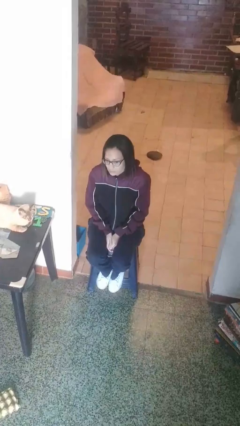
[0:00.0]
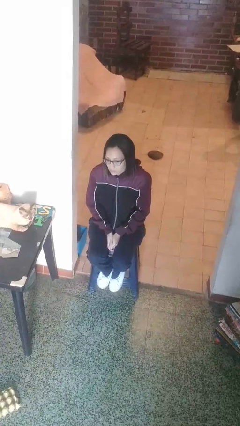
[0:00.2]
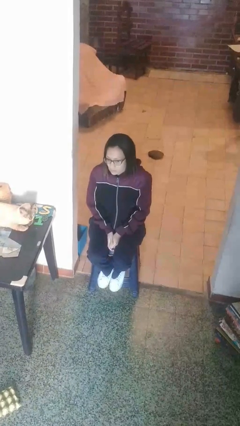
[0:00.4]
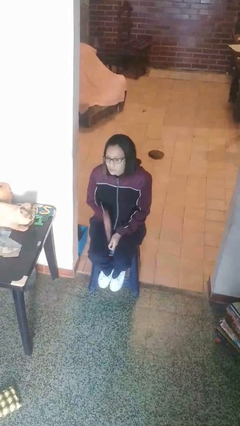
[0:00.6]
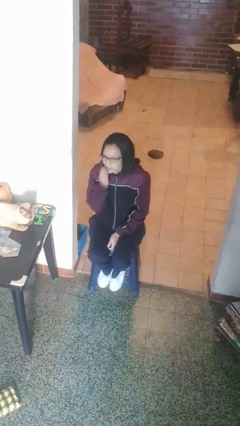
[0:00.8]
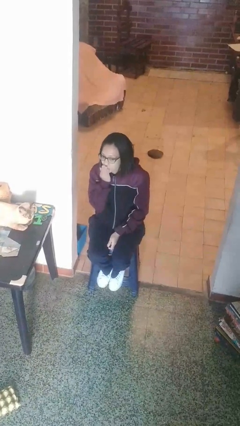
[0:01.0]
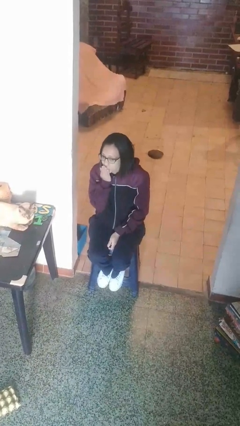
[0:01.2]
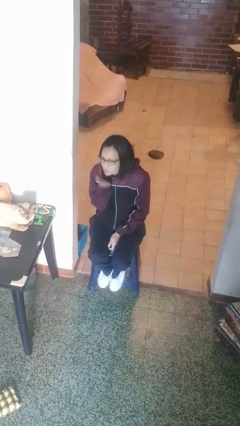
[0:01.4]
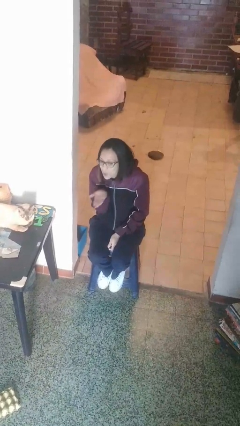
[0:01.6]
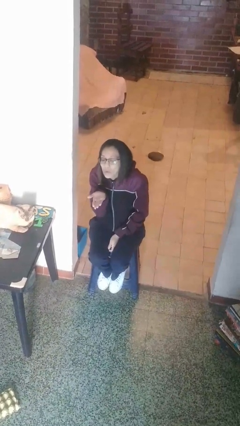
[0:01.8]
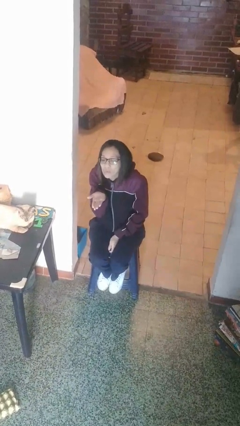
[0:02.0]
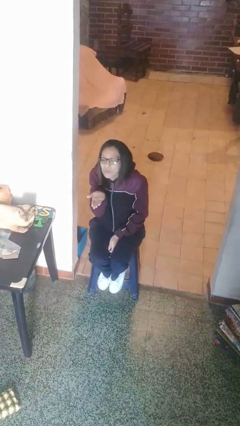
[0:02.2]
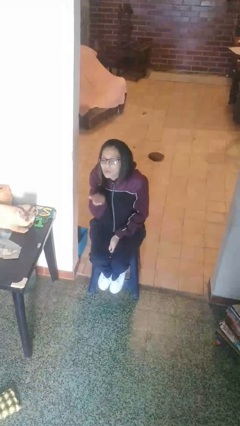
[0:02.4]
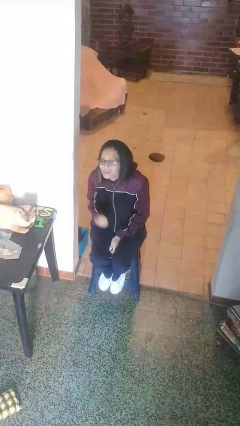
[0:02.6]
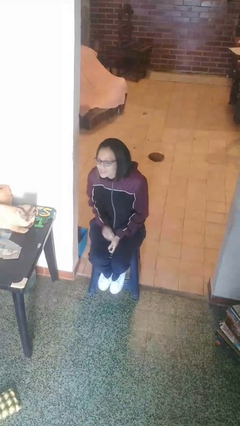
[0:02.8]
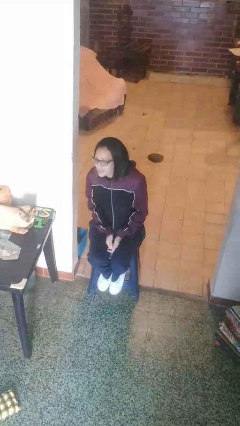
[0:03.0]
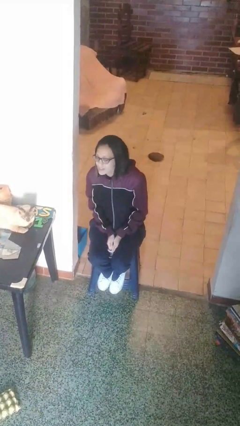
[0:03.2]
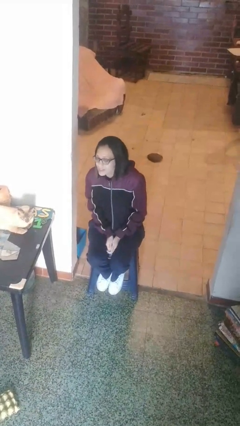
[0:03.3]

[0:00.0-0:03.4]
person gestures blow kiss

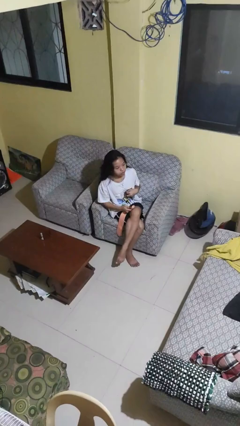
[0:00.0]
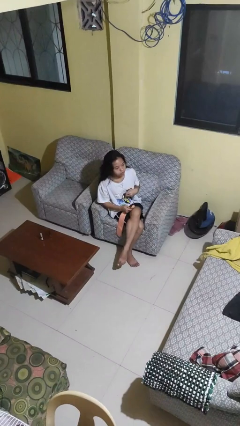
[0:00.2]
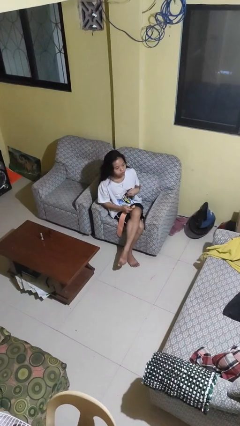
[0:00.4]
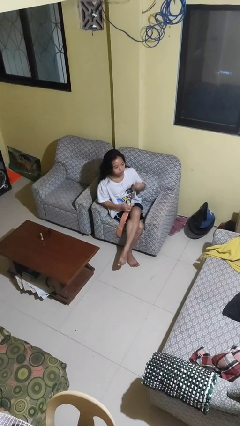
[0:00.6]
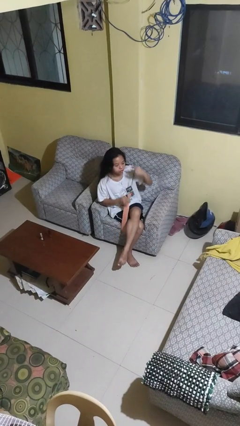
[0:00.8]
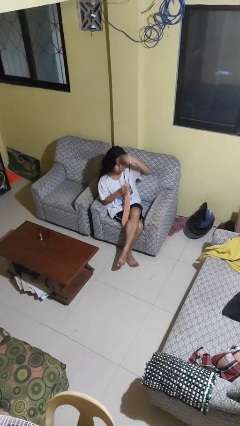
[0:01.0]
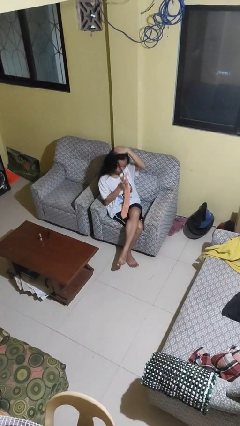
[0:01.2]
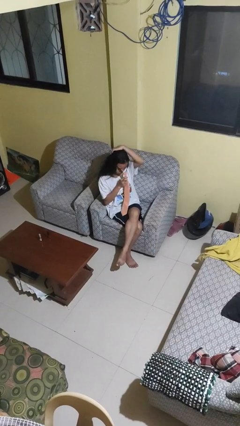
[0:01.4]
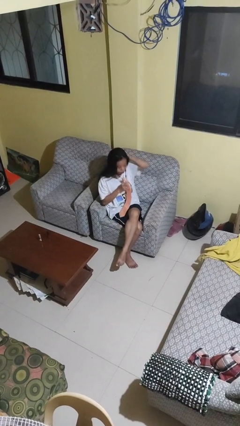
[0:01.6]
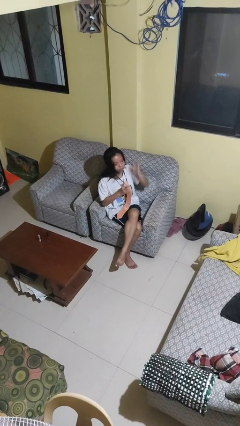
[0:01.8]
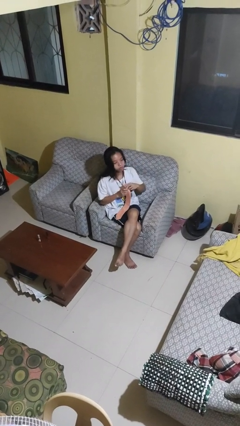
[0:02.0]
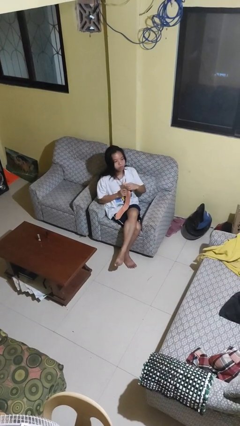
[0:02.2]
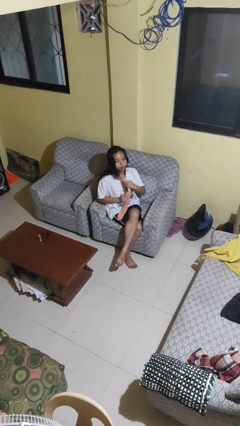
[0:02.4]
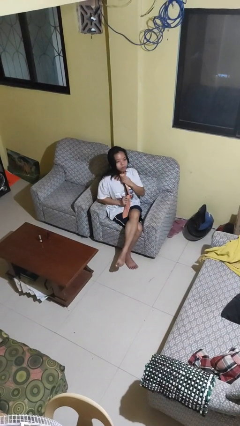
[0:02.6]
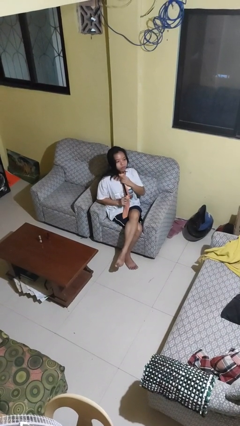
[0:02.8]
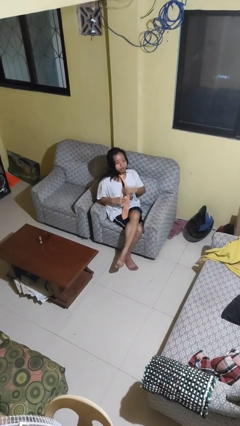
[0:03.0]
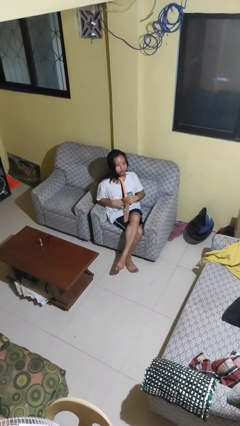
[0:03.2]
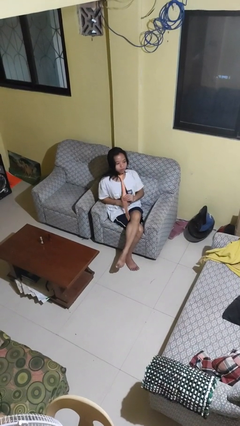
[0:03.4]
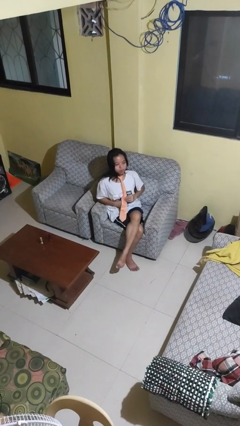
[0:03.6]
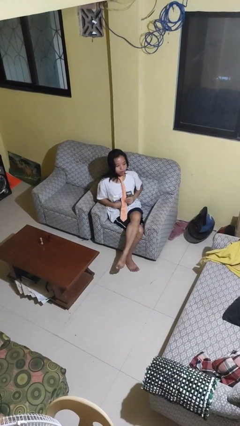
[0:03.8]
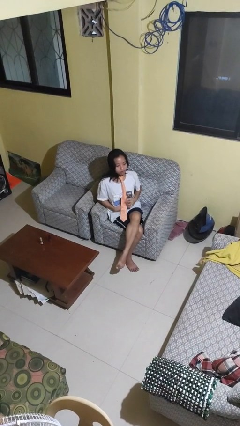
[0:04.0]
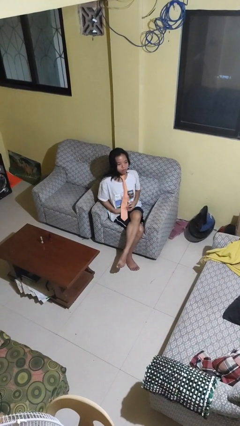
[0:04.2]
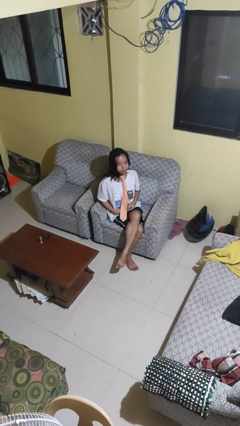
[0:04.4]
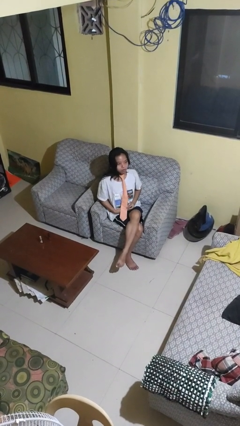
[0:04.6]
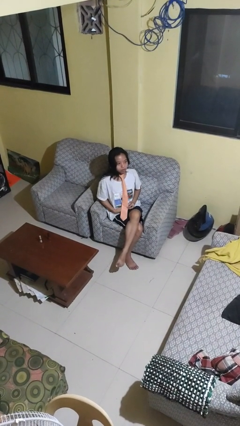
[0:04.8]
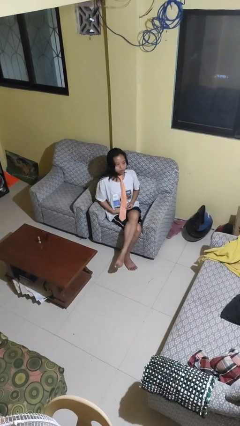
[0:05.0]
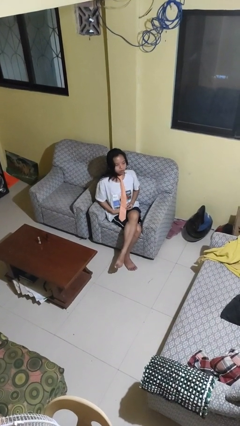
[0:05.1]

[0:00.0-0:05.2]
person puts on necktie

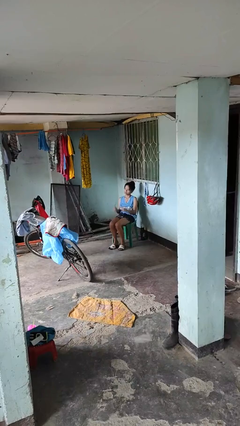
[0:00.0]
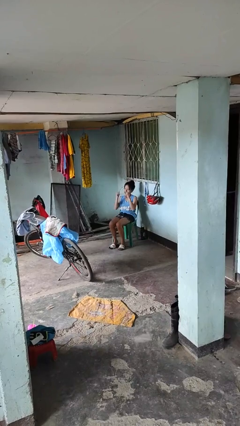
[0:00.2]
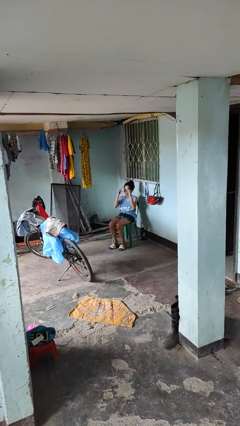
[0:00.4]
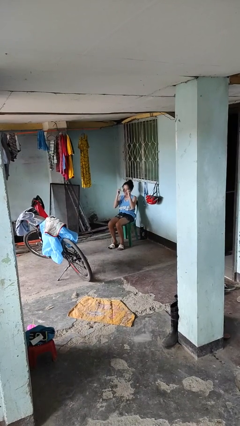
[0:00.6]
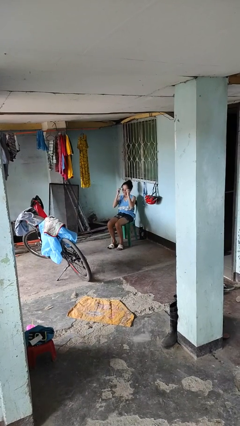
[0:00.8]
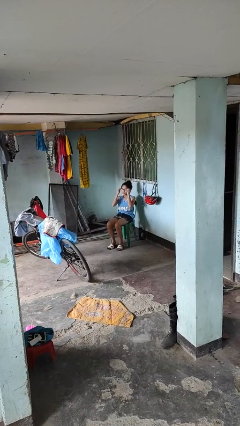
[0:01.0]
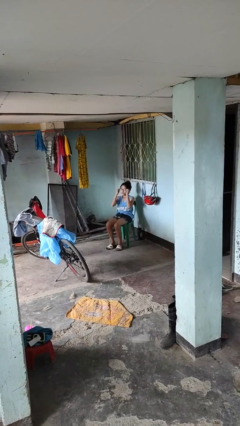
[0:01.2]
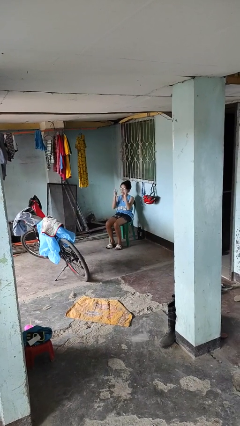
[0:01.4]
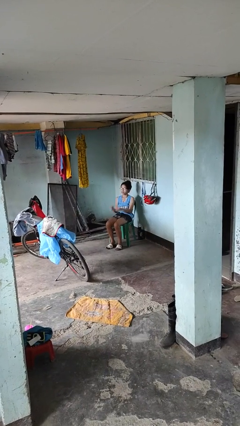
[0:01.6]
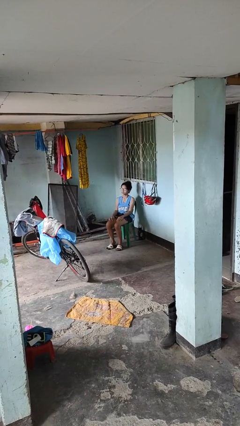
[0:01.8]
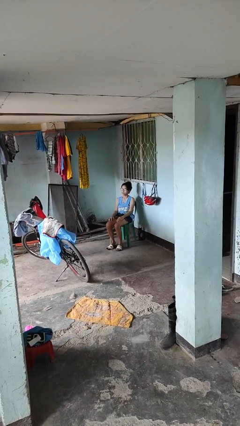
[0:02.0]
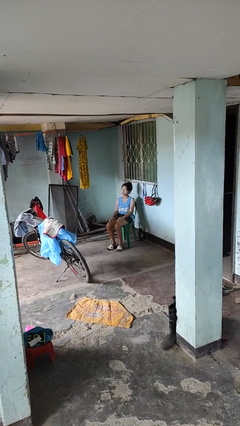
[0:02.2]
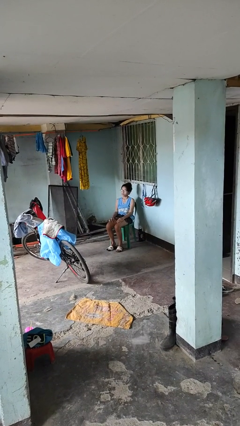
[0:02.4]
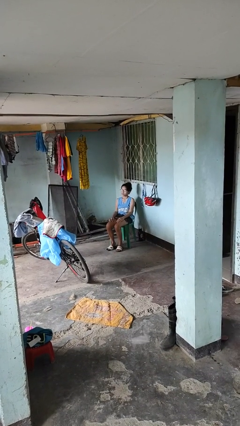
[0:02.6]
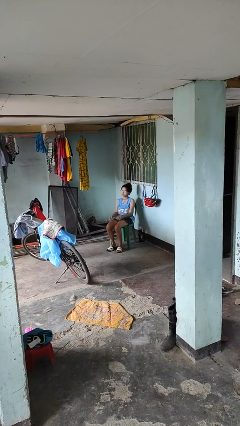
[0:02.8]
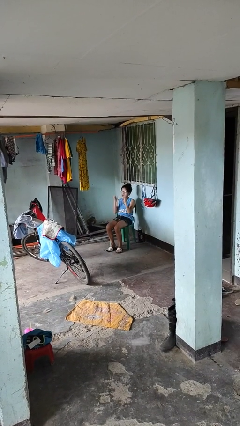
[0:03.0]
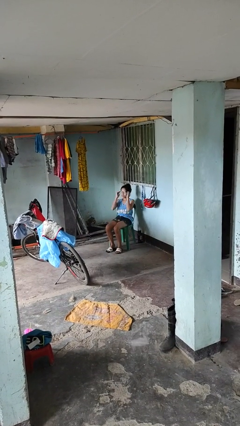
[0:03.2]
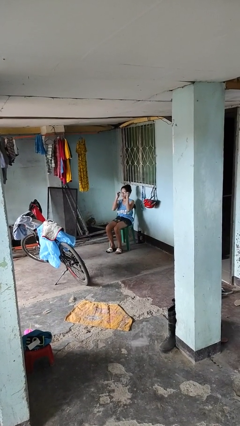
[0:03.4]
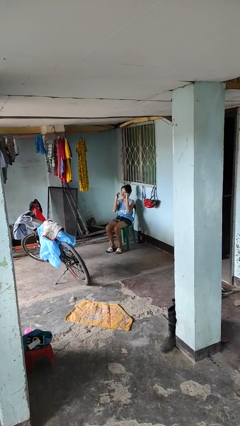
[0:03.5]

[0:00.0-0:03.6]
person puts on glasses

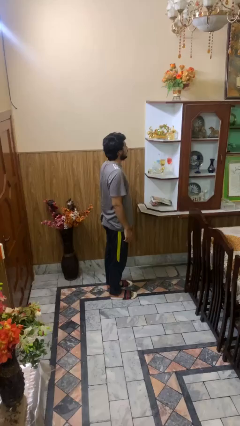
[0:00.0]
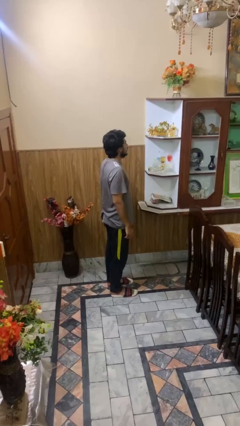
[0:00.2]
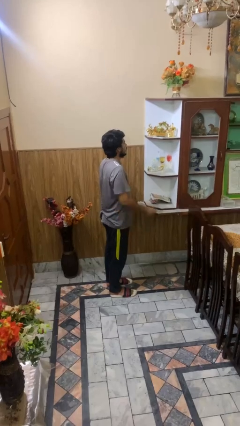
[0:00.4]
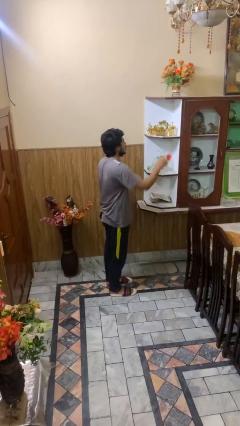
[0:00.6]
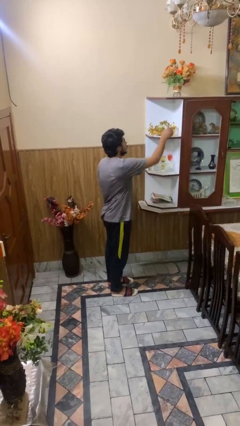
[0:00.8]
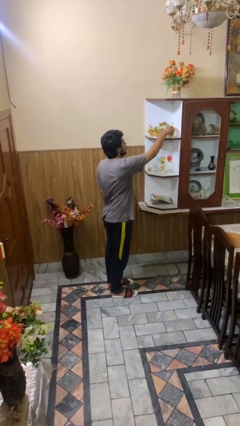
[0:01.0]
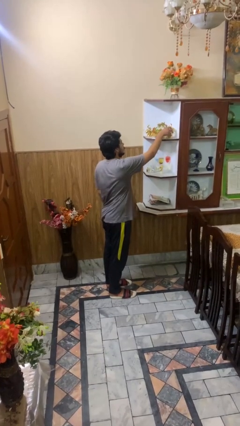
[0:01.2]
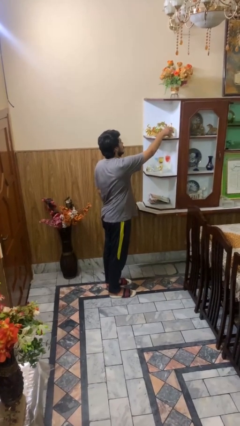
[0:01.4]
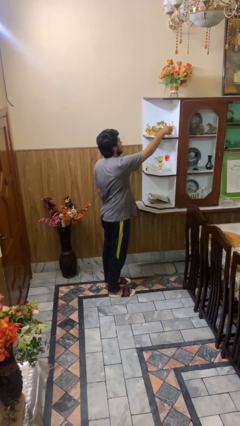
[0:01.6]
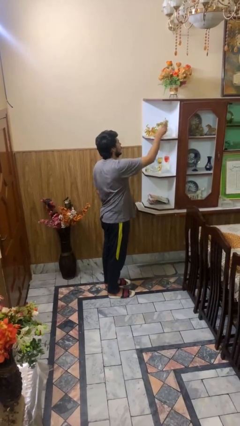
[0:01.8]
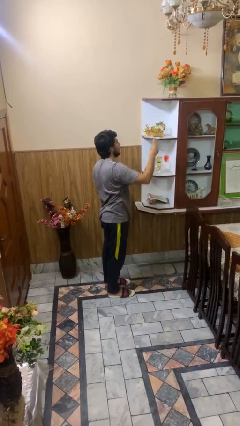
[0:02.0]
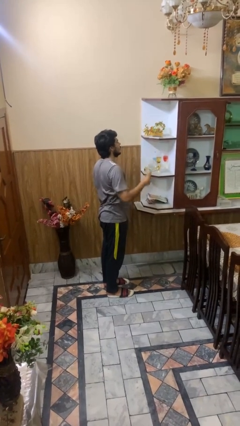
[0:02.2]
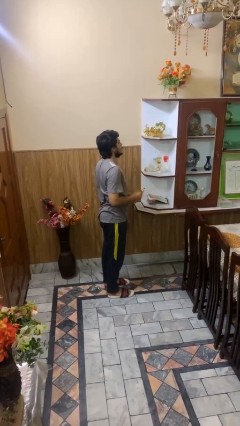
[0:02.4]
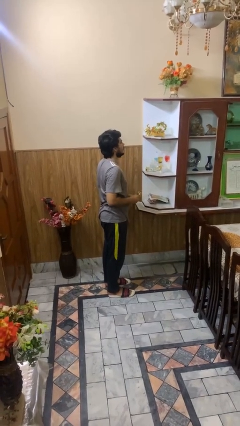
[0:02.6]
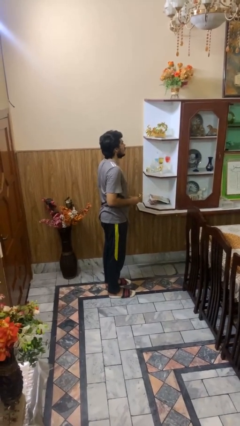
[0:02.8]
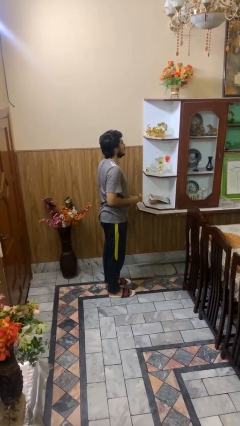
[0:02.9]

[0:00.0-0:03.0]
person picks up object from shelf

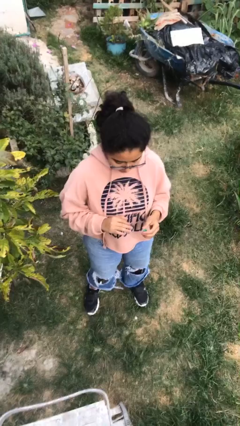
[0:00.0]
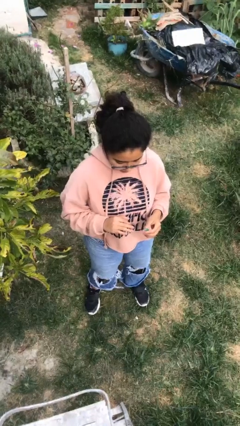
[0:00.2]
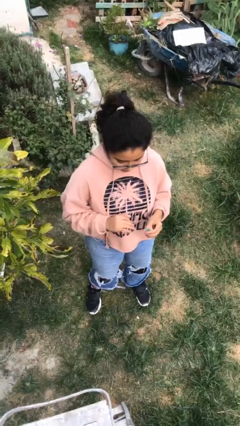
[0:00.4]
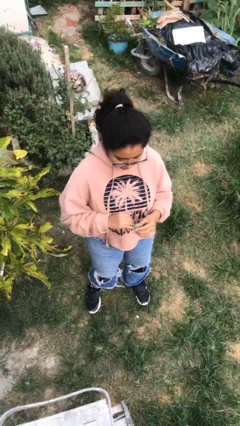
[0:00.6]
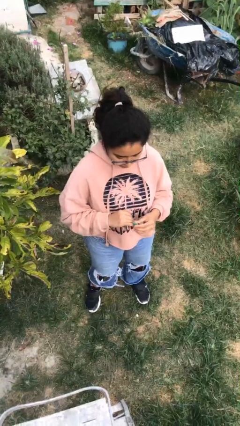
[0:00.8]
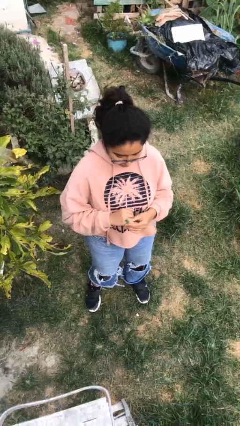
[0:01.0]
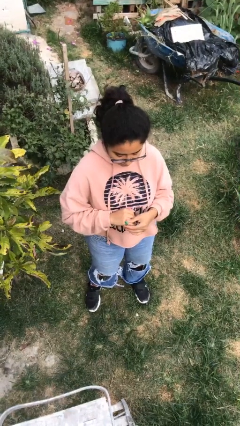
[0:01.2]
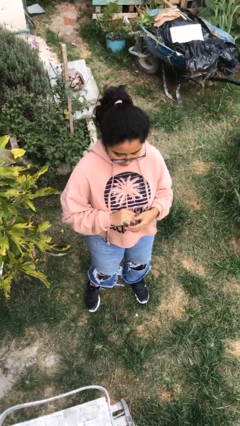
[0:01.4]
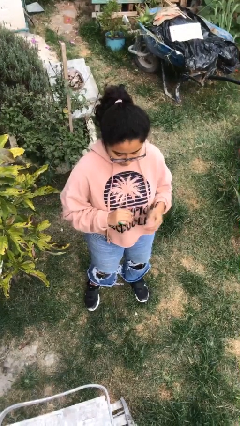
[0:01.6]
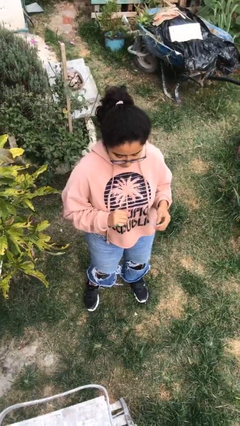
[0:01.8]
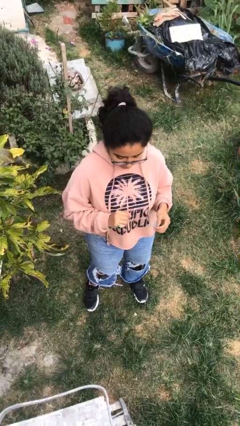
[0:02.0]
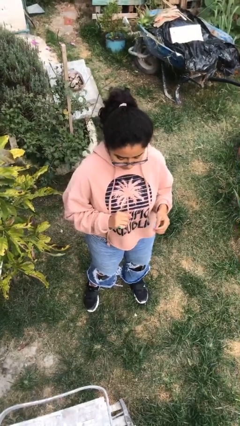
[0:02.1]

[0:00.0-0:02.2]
person puts on ring

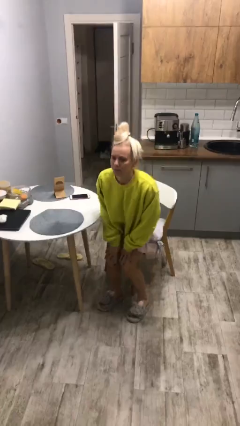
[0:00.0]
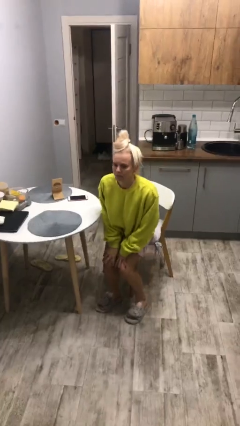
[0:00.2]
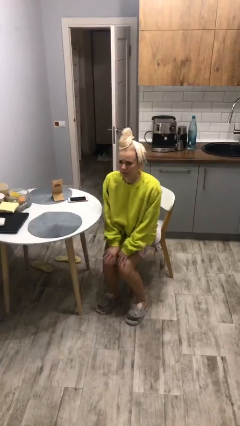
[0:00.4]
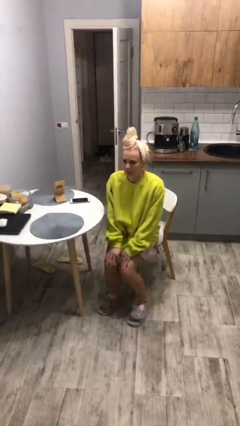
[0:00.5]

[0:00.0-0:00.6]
person sits down
